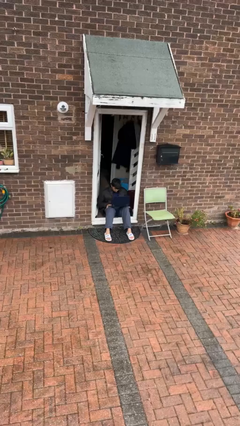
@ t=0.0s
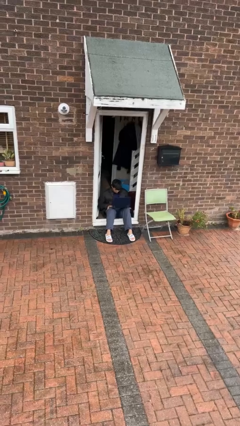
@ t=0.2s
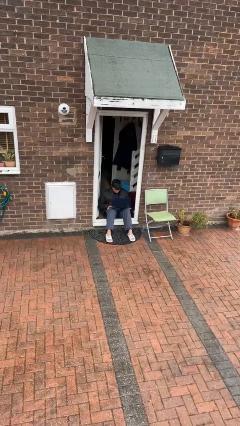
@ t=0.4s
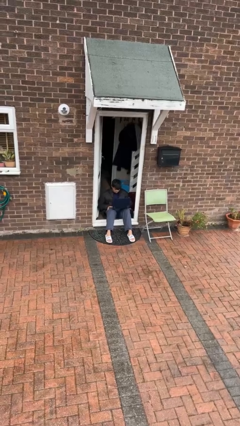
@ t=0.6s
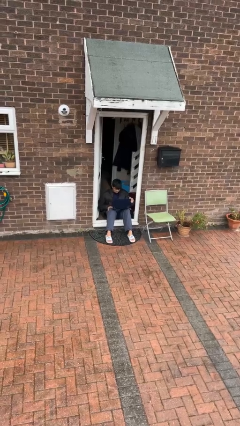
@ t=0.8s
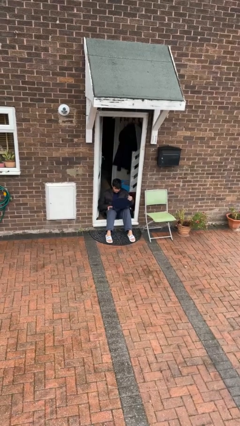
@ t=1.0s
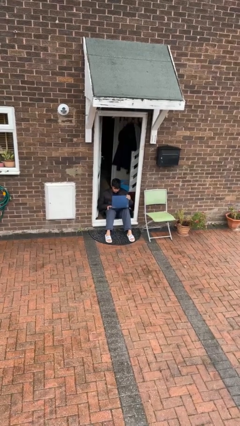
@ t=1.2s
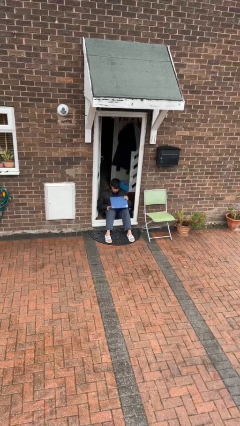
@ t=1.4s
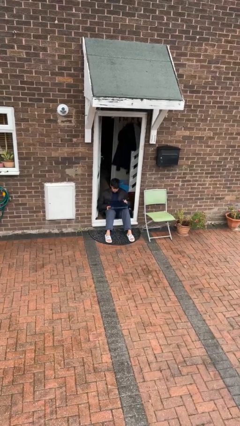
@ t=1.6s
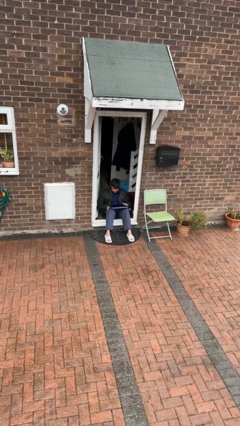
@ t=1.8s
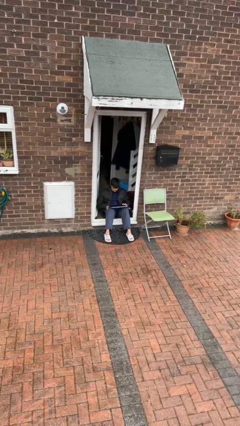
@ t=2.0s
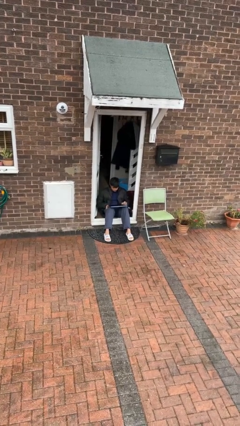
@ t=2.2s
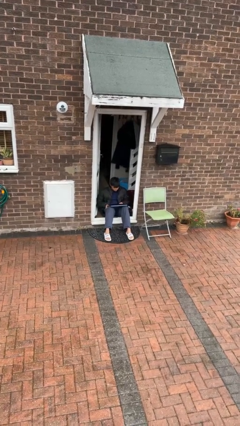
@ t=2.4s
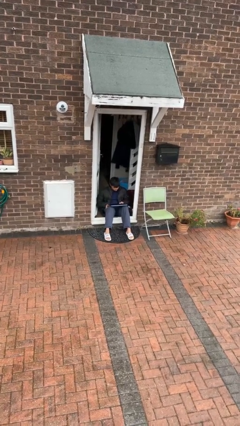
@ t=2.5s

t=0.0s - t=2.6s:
person closes laptop

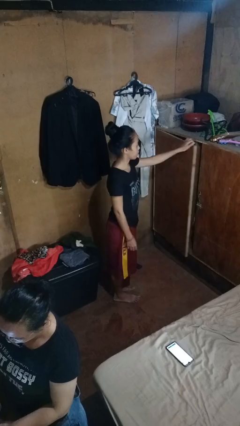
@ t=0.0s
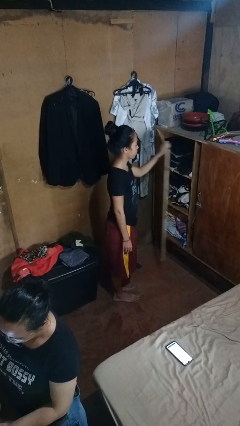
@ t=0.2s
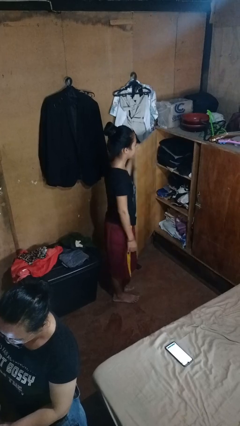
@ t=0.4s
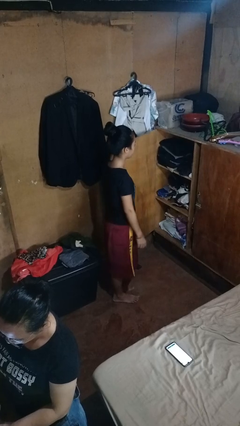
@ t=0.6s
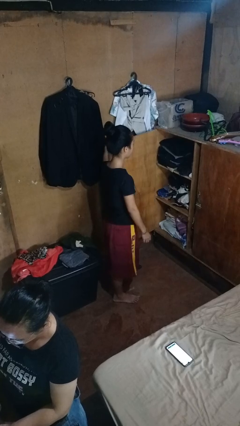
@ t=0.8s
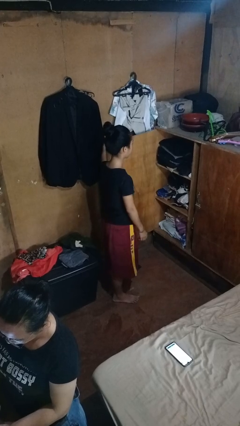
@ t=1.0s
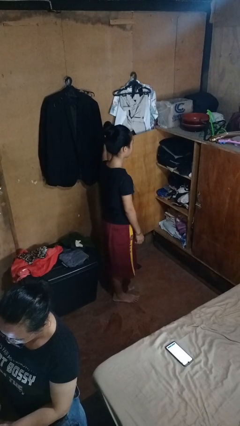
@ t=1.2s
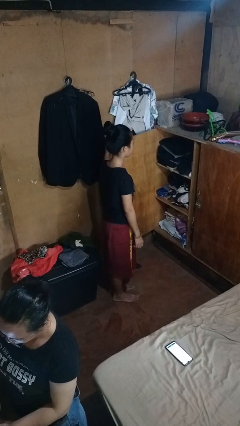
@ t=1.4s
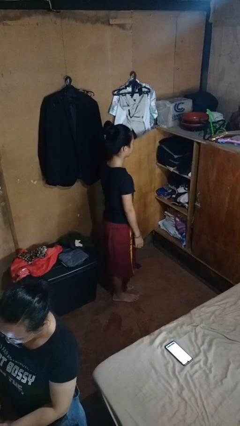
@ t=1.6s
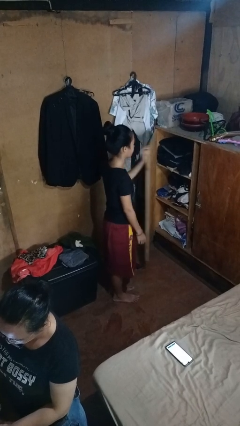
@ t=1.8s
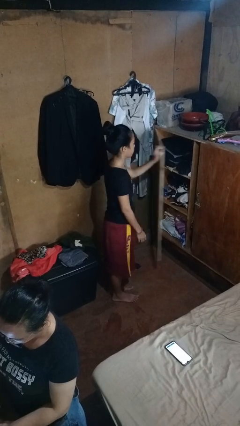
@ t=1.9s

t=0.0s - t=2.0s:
person opens closet door

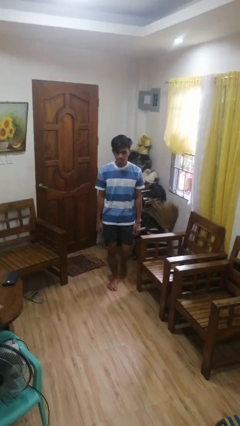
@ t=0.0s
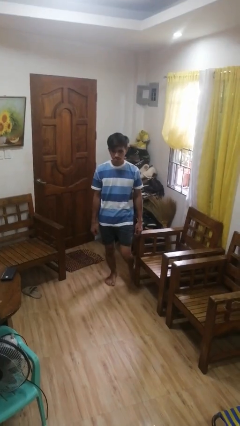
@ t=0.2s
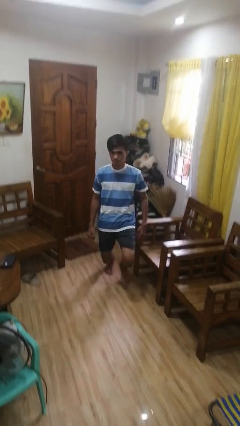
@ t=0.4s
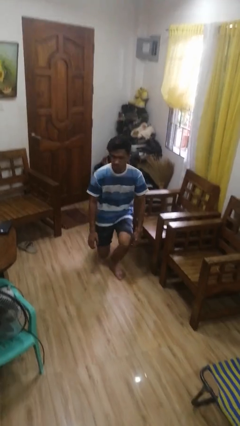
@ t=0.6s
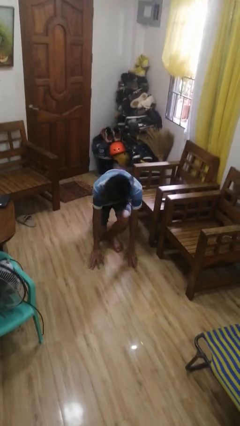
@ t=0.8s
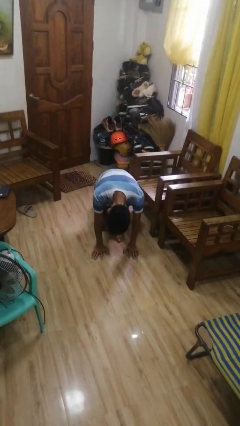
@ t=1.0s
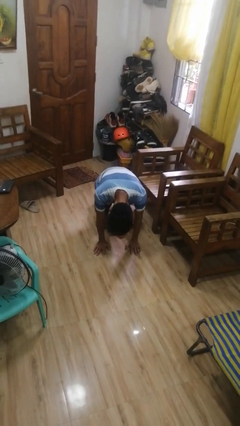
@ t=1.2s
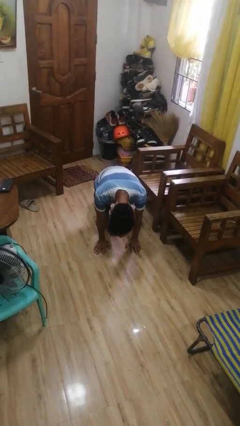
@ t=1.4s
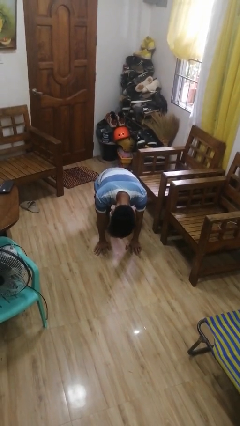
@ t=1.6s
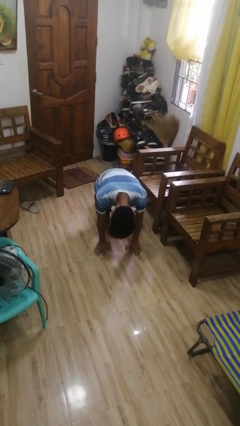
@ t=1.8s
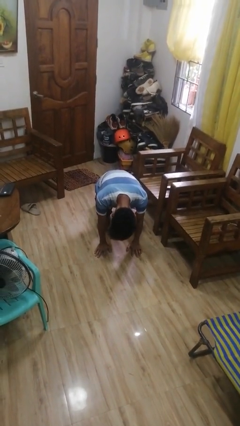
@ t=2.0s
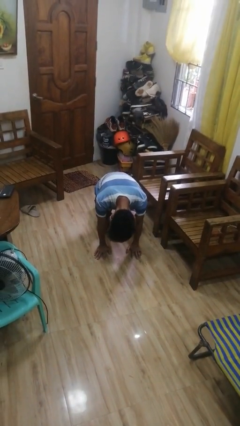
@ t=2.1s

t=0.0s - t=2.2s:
person trips on object on floor

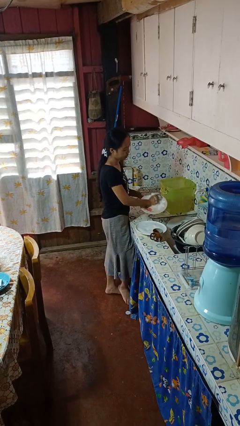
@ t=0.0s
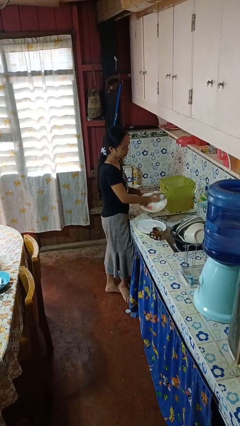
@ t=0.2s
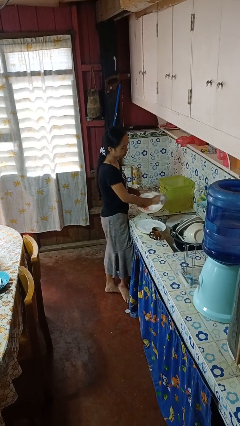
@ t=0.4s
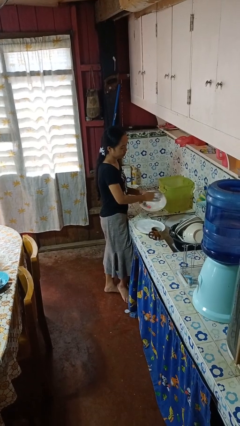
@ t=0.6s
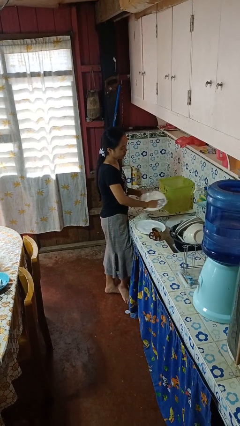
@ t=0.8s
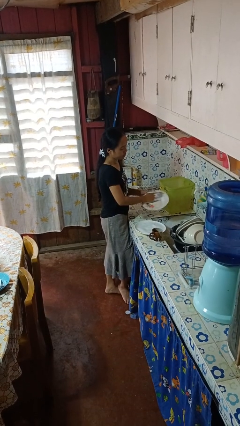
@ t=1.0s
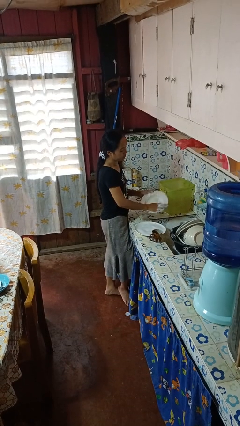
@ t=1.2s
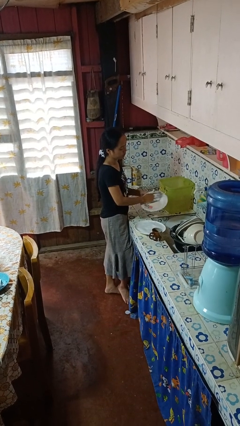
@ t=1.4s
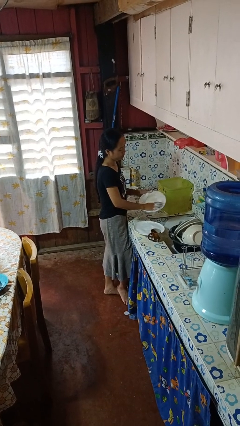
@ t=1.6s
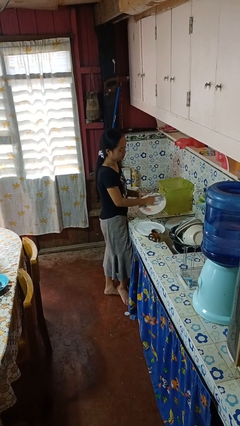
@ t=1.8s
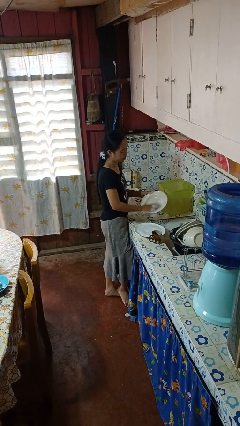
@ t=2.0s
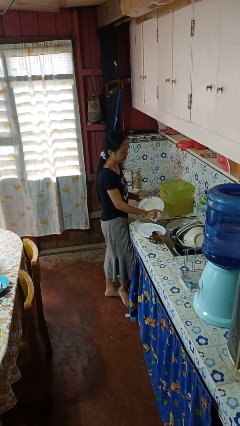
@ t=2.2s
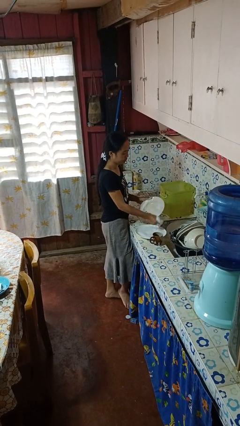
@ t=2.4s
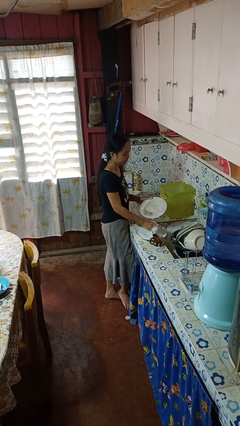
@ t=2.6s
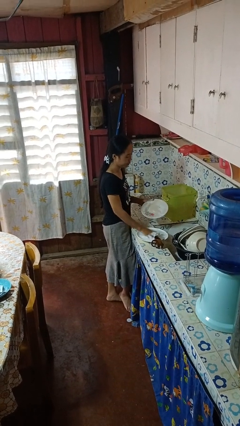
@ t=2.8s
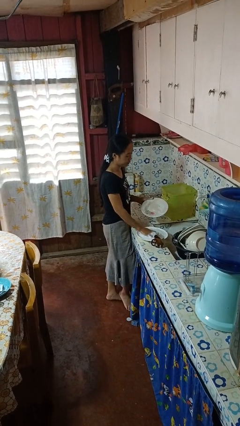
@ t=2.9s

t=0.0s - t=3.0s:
person washes dish

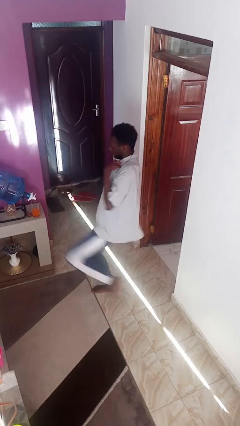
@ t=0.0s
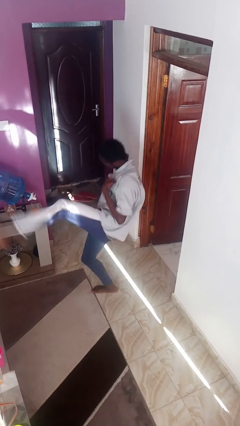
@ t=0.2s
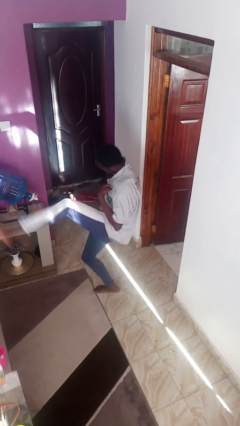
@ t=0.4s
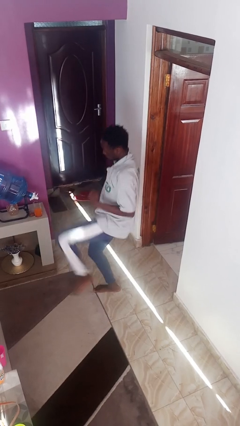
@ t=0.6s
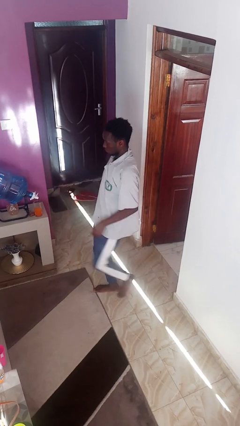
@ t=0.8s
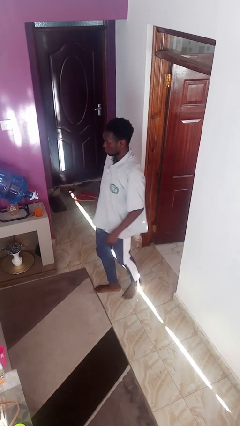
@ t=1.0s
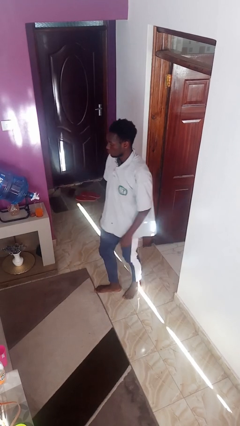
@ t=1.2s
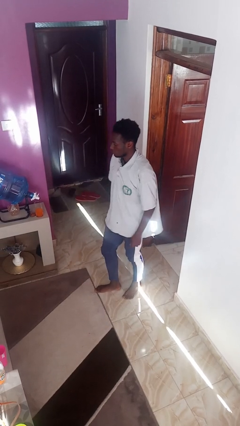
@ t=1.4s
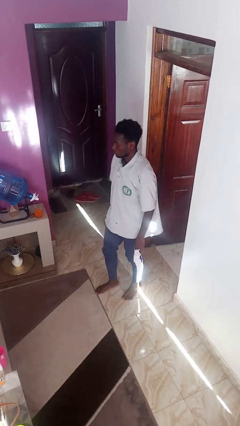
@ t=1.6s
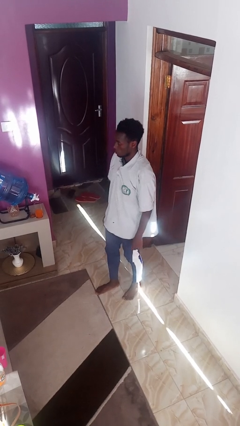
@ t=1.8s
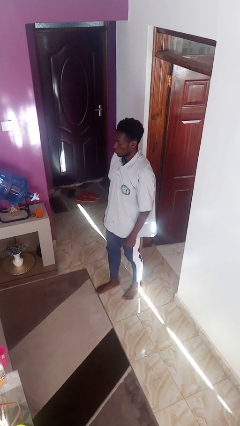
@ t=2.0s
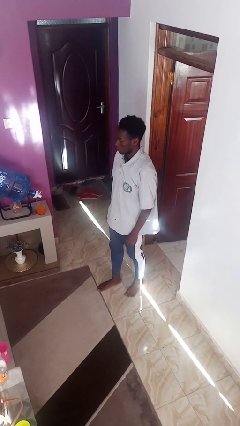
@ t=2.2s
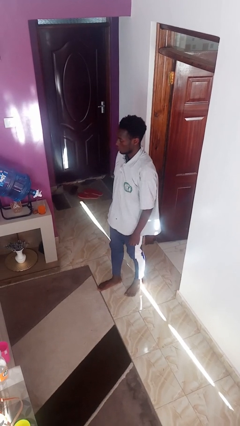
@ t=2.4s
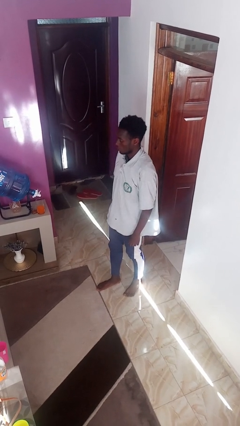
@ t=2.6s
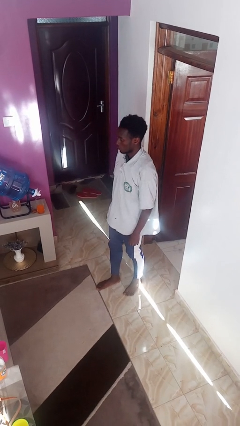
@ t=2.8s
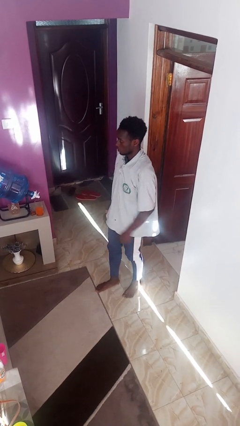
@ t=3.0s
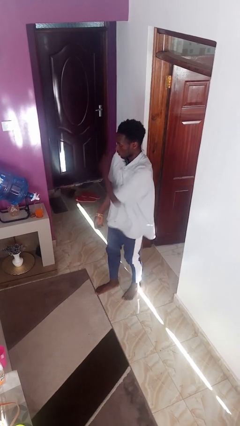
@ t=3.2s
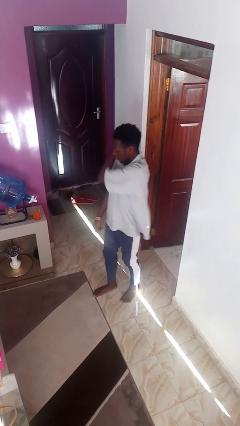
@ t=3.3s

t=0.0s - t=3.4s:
person karate kicks

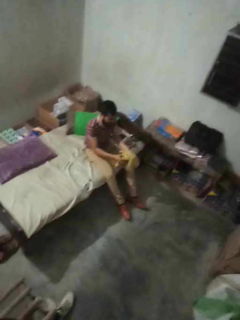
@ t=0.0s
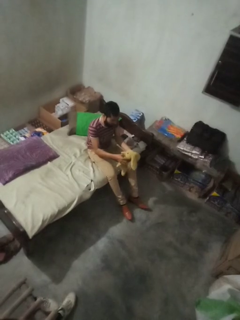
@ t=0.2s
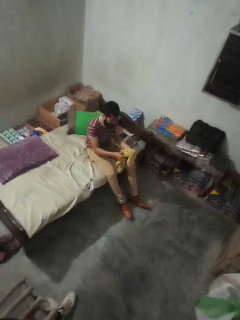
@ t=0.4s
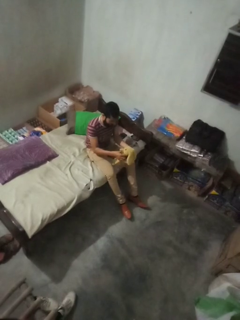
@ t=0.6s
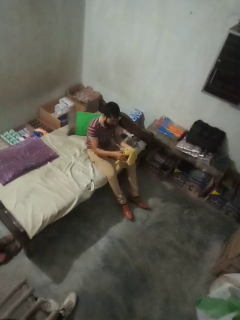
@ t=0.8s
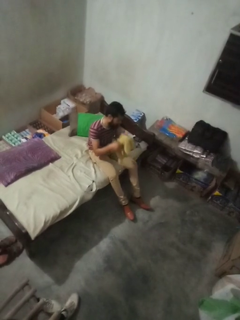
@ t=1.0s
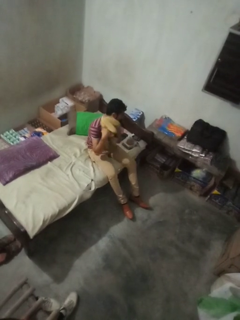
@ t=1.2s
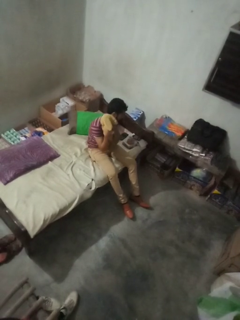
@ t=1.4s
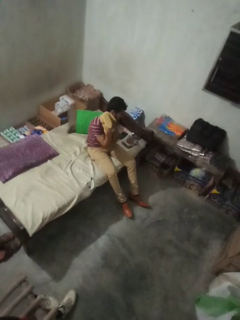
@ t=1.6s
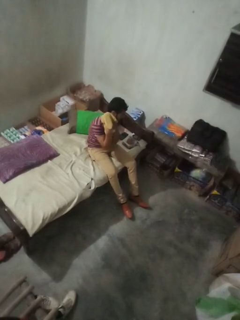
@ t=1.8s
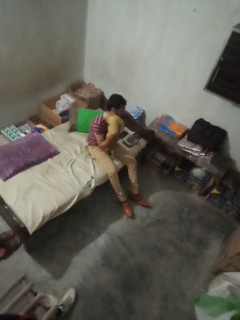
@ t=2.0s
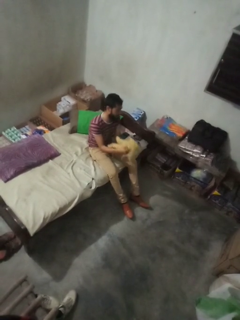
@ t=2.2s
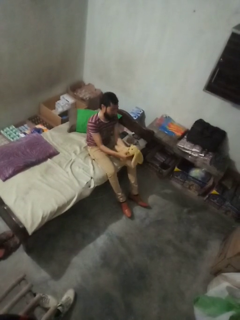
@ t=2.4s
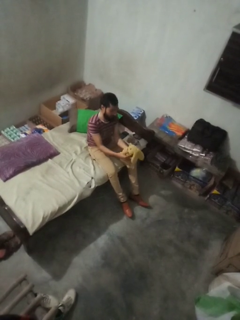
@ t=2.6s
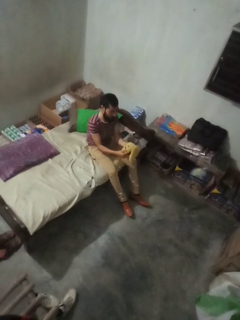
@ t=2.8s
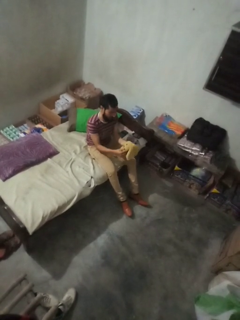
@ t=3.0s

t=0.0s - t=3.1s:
person hugs stuffed animal

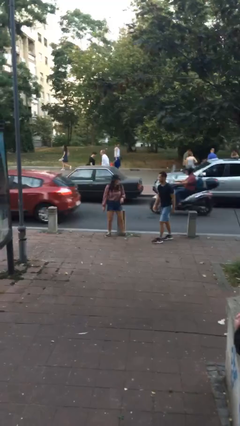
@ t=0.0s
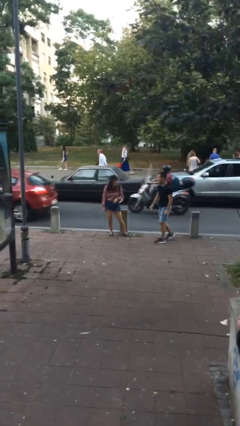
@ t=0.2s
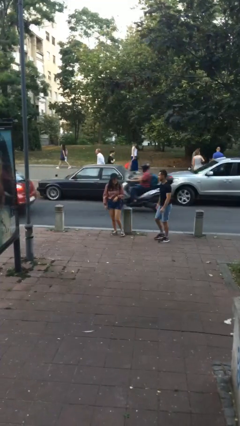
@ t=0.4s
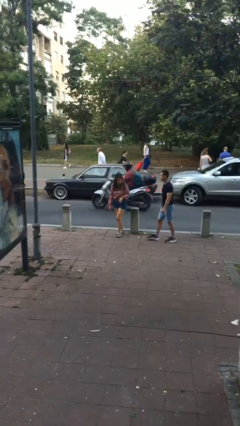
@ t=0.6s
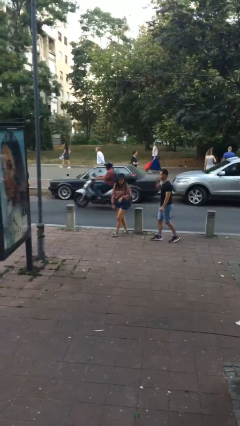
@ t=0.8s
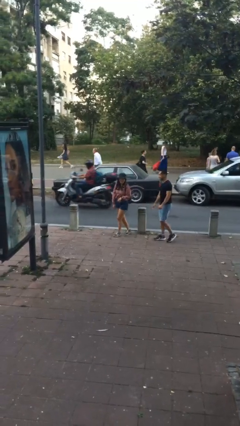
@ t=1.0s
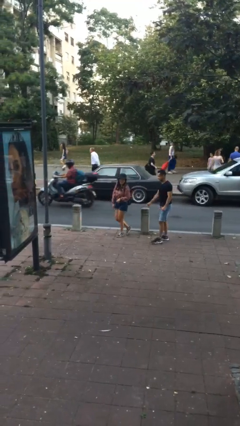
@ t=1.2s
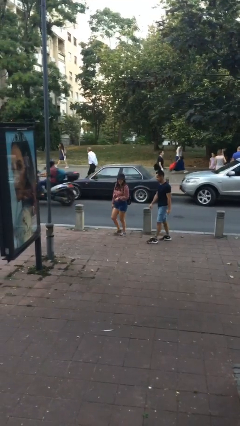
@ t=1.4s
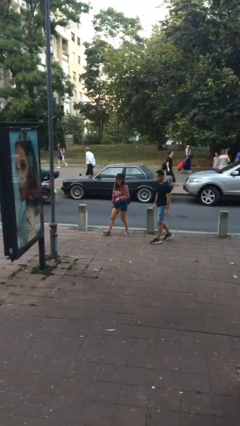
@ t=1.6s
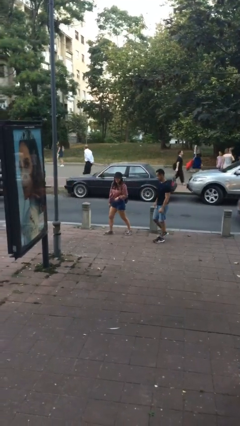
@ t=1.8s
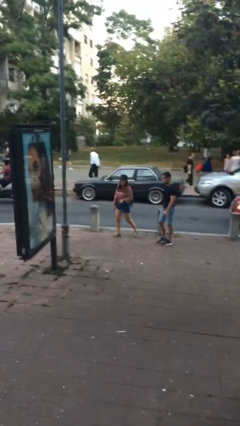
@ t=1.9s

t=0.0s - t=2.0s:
person talks to person
